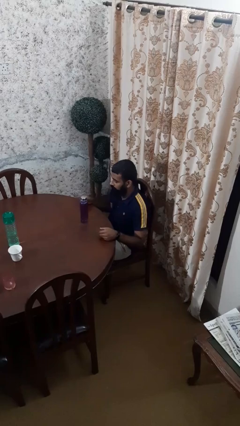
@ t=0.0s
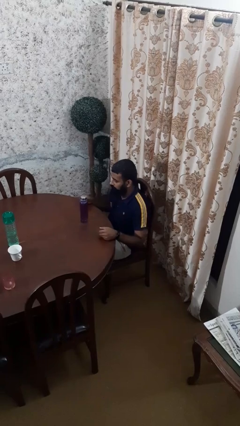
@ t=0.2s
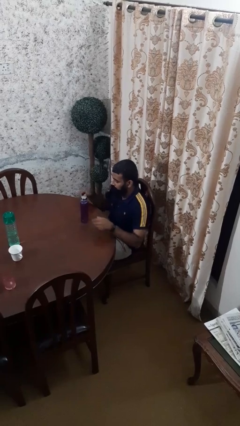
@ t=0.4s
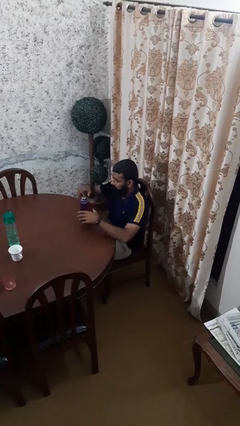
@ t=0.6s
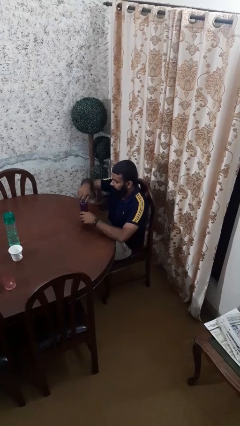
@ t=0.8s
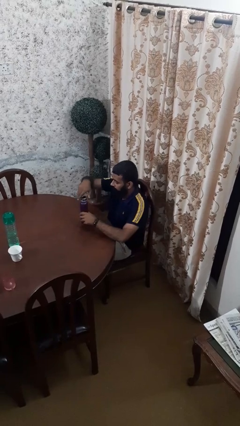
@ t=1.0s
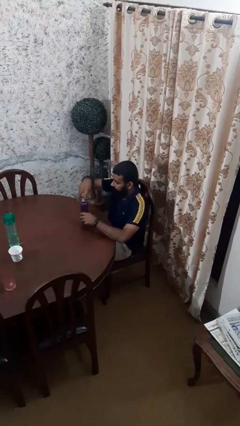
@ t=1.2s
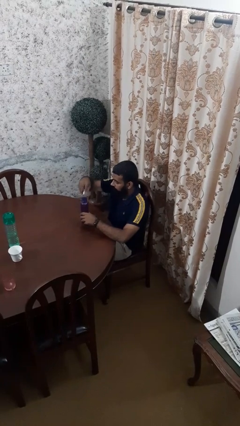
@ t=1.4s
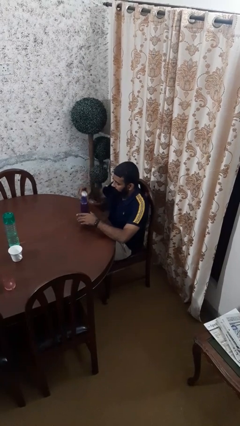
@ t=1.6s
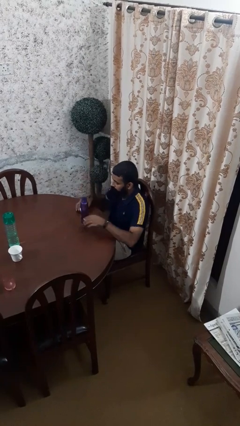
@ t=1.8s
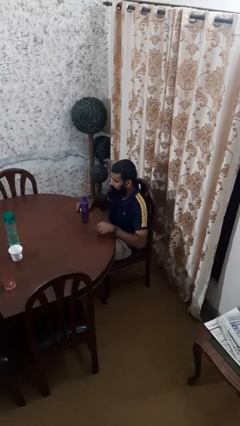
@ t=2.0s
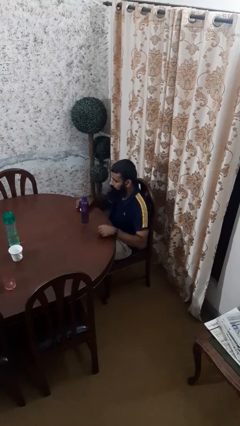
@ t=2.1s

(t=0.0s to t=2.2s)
person unscrews lid from bottle

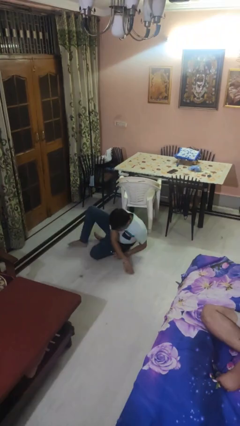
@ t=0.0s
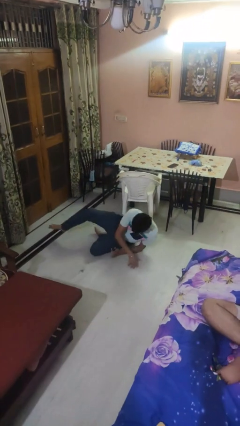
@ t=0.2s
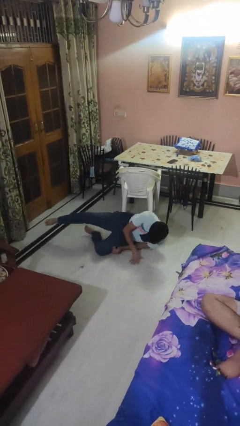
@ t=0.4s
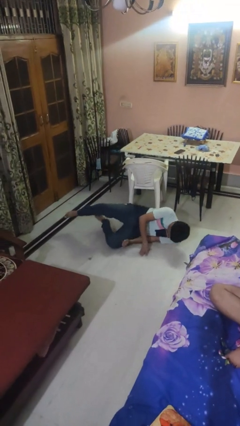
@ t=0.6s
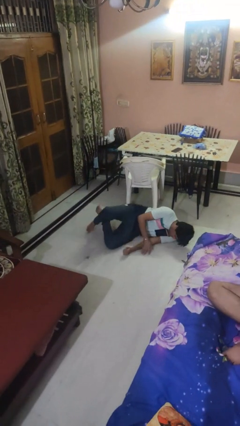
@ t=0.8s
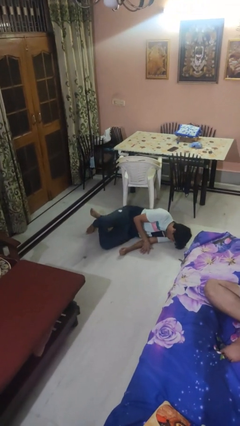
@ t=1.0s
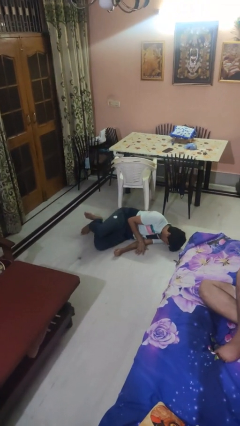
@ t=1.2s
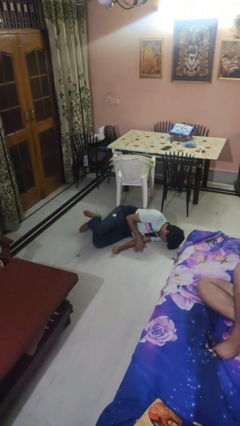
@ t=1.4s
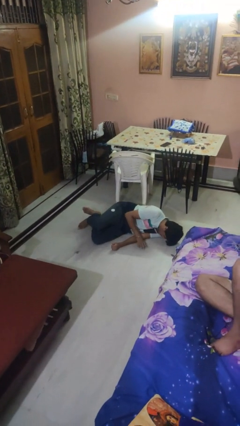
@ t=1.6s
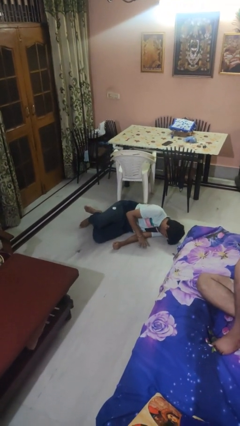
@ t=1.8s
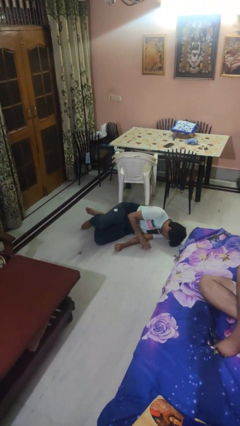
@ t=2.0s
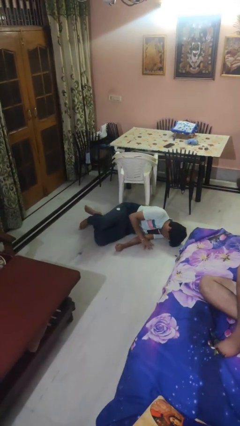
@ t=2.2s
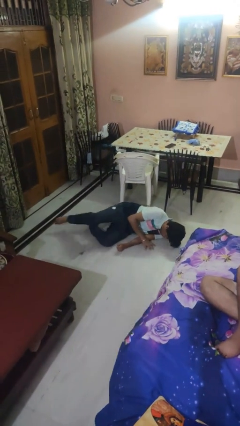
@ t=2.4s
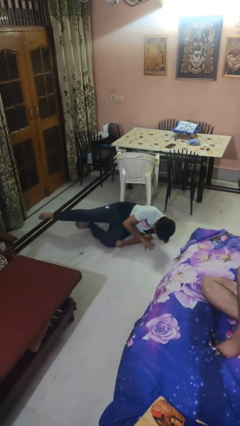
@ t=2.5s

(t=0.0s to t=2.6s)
person lies down on floor

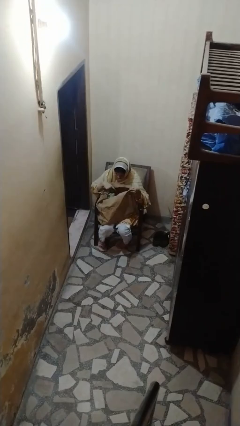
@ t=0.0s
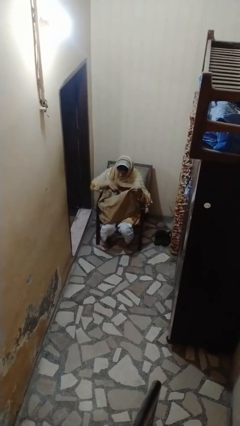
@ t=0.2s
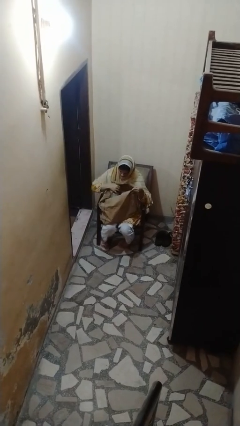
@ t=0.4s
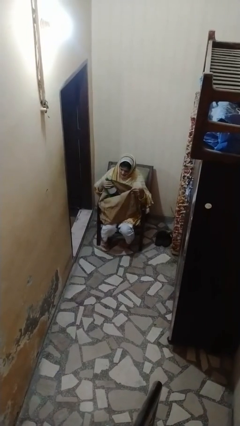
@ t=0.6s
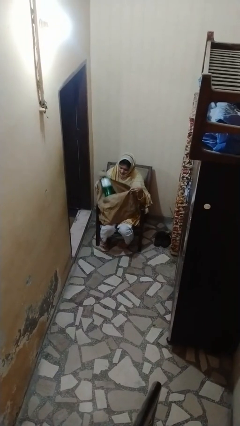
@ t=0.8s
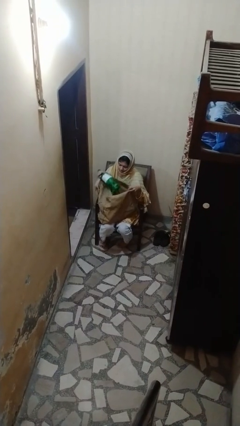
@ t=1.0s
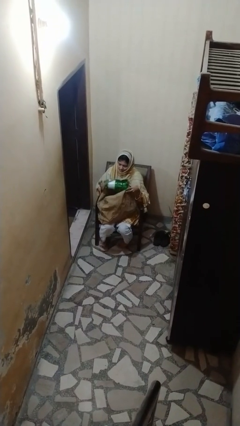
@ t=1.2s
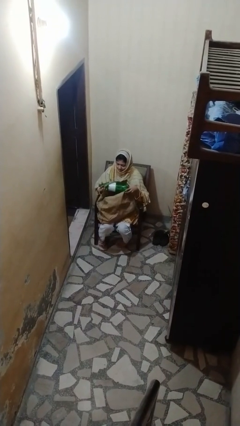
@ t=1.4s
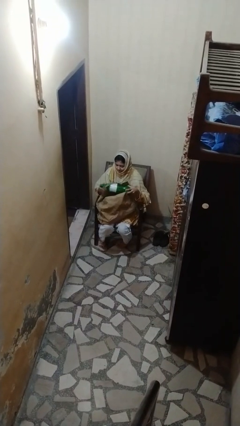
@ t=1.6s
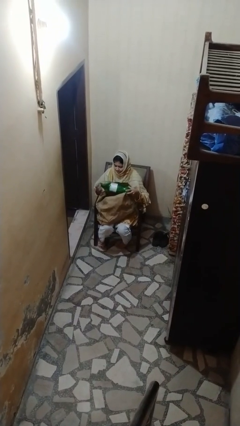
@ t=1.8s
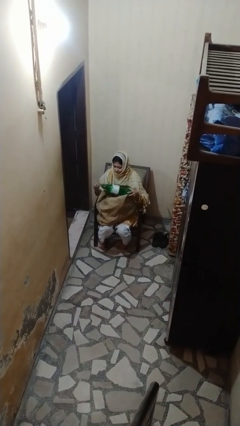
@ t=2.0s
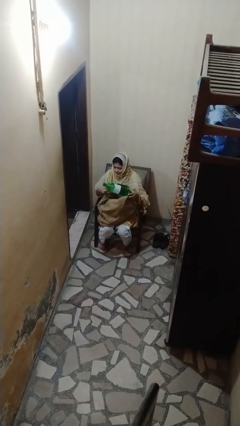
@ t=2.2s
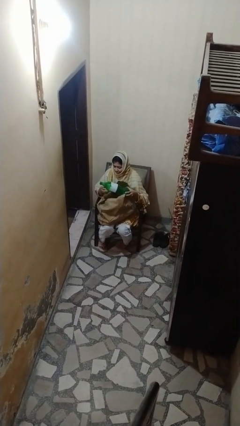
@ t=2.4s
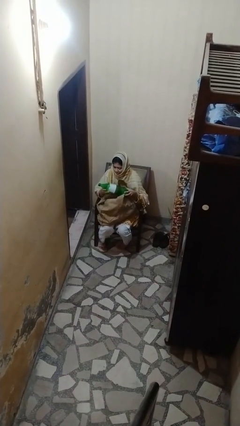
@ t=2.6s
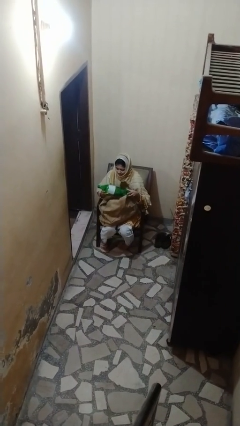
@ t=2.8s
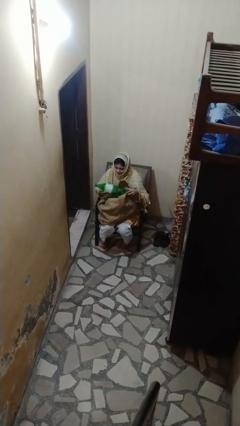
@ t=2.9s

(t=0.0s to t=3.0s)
person takes object from bag

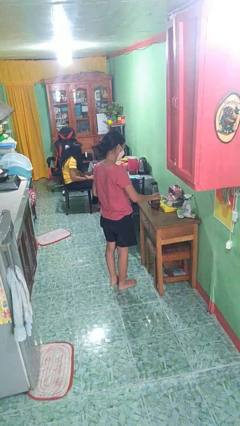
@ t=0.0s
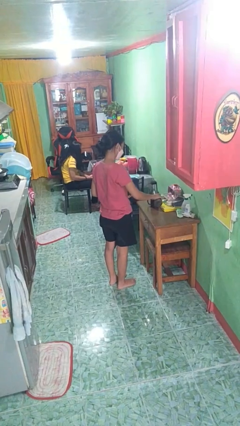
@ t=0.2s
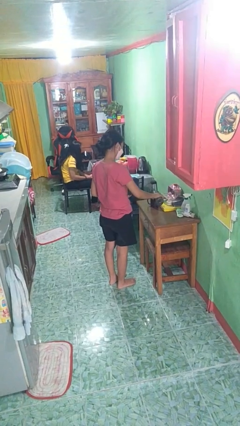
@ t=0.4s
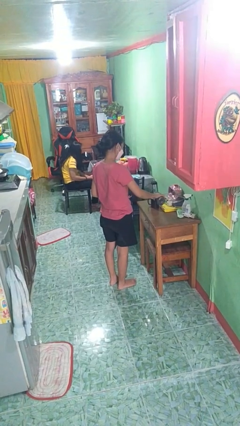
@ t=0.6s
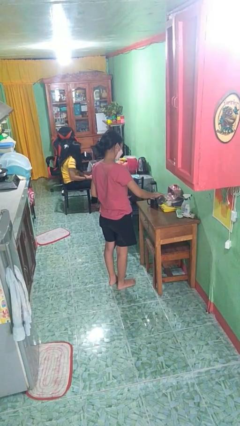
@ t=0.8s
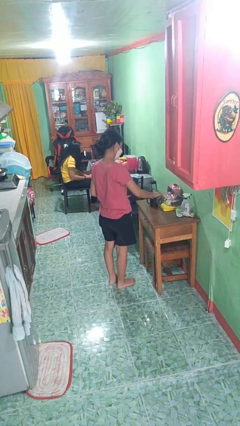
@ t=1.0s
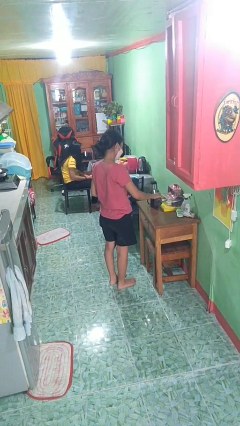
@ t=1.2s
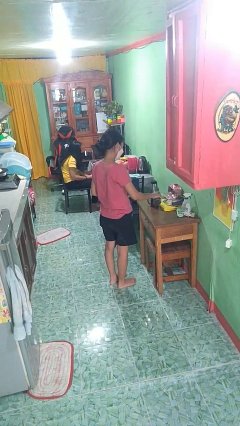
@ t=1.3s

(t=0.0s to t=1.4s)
person pours liquid into cup

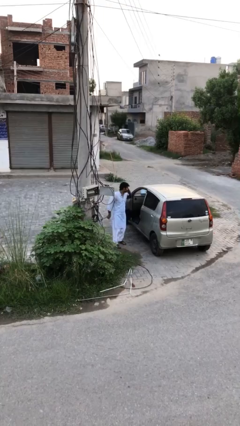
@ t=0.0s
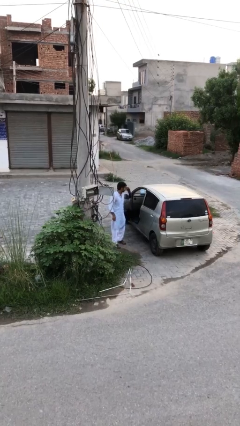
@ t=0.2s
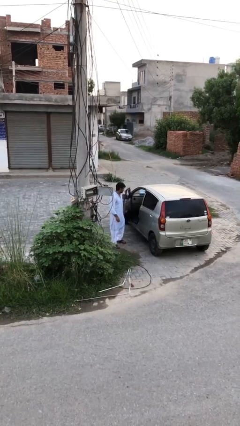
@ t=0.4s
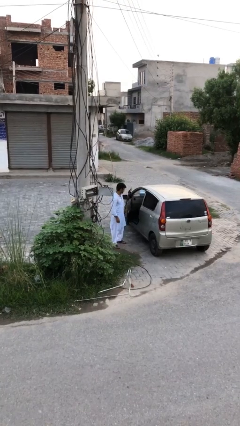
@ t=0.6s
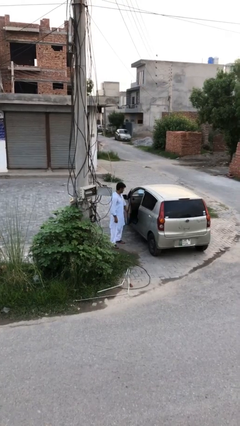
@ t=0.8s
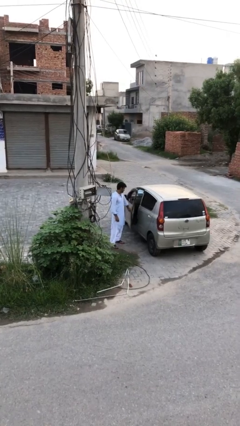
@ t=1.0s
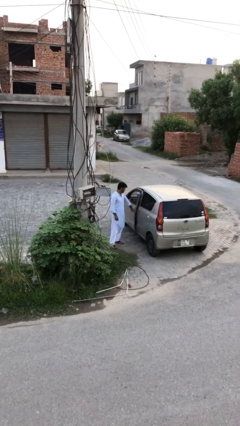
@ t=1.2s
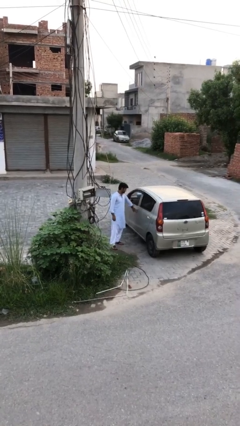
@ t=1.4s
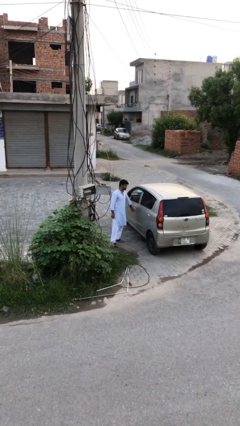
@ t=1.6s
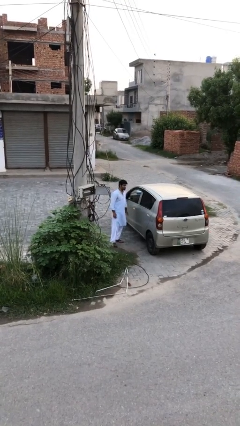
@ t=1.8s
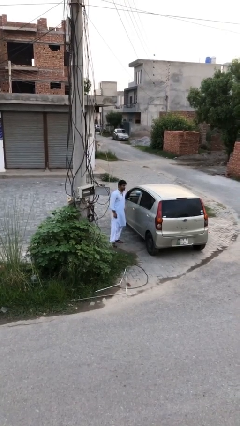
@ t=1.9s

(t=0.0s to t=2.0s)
person closes car door

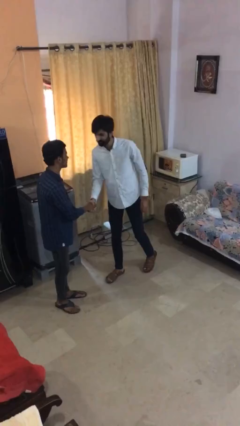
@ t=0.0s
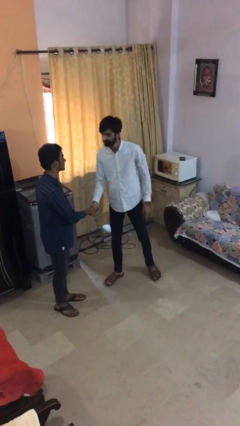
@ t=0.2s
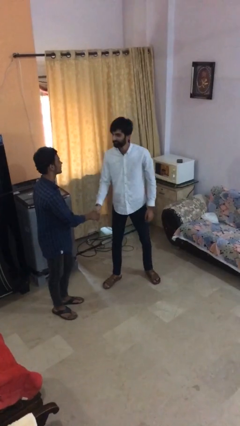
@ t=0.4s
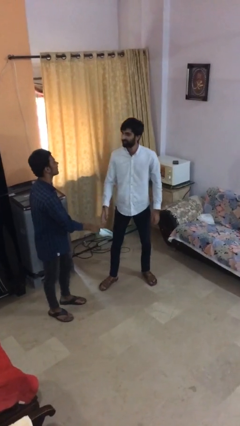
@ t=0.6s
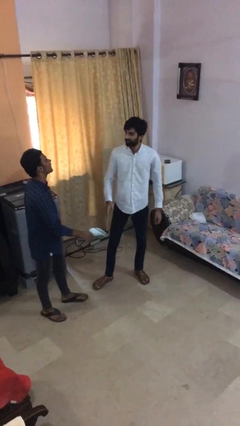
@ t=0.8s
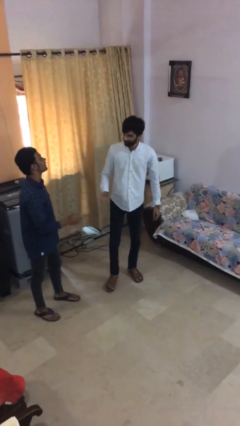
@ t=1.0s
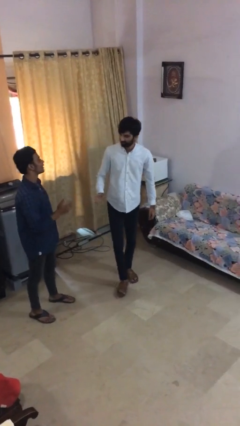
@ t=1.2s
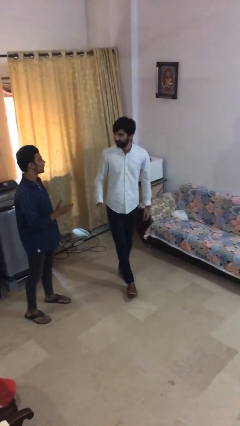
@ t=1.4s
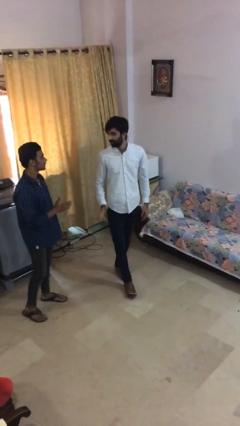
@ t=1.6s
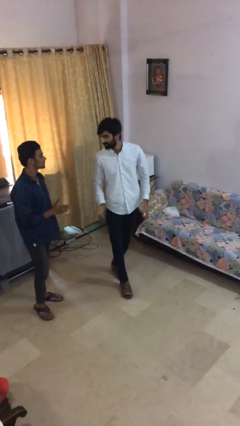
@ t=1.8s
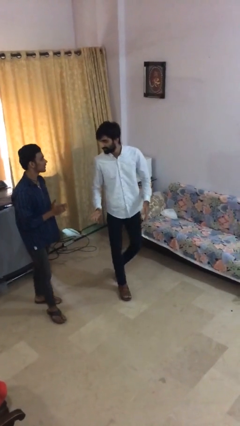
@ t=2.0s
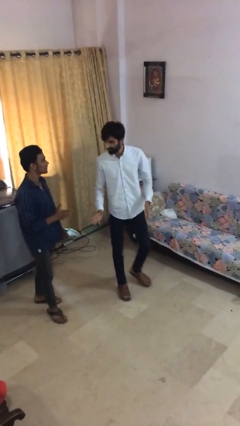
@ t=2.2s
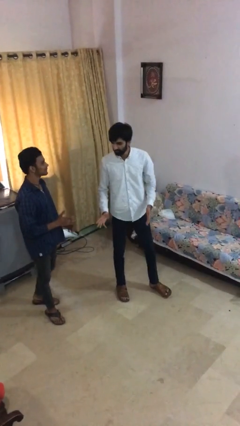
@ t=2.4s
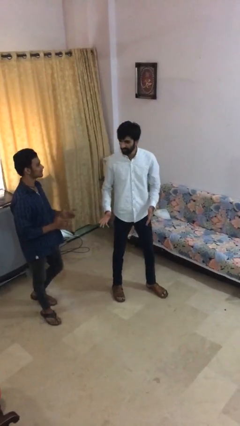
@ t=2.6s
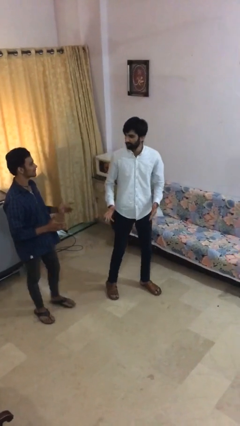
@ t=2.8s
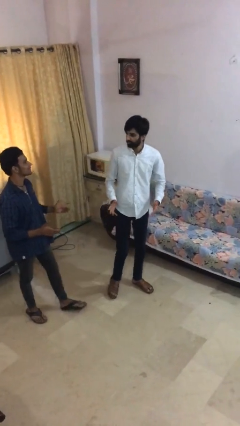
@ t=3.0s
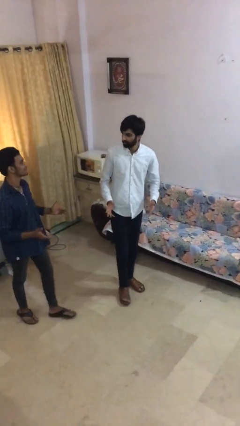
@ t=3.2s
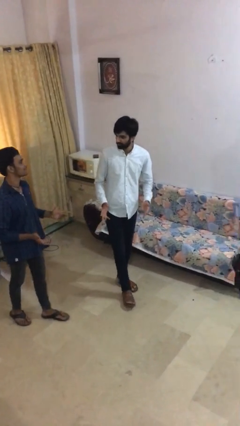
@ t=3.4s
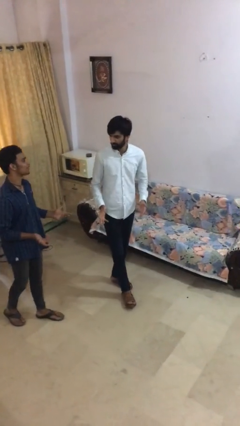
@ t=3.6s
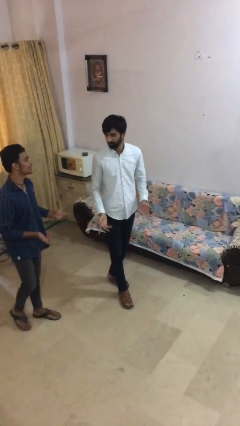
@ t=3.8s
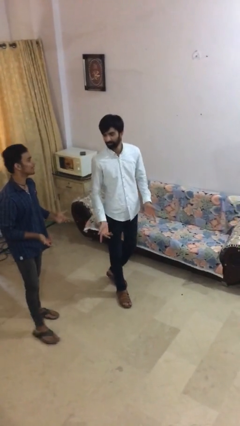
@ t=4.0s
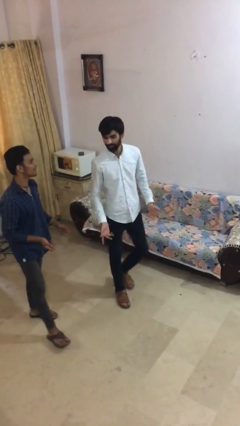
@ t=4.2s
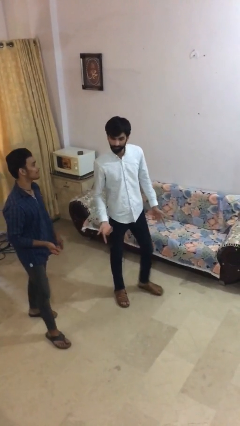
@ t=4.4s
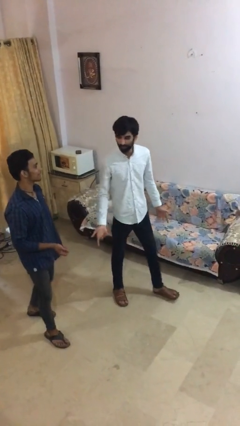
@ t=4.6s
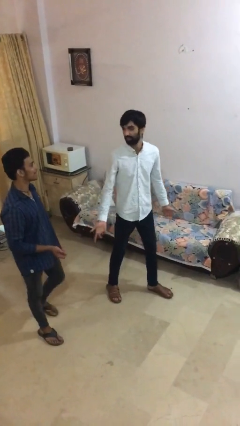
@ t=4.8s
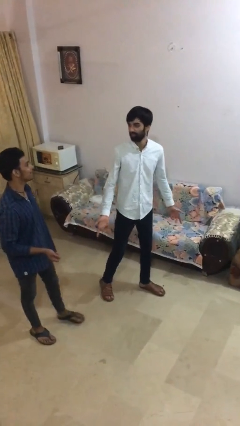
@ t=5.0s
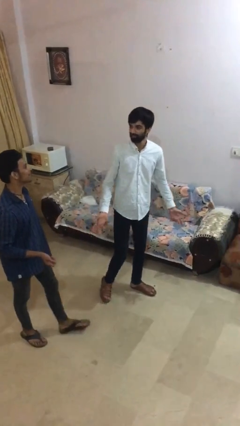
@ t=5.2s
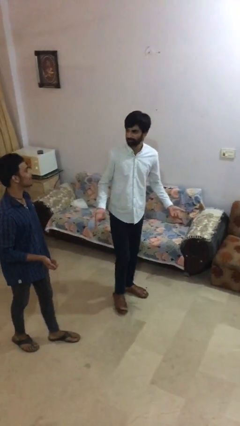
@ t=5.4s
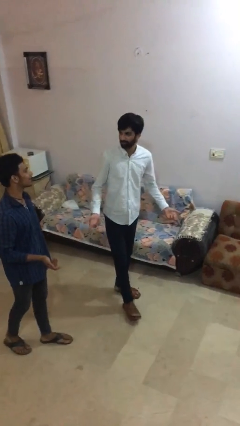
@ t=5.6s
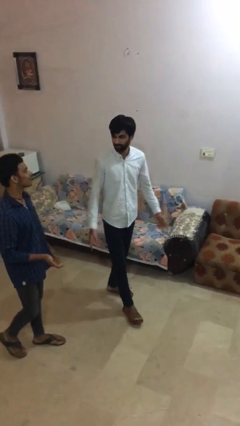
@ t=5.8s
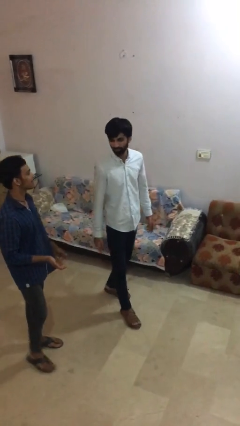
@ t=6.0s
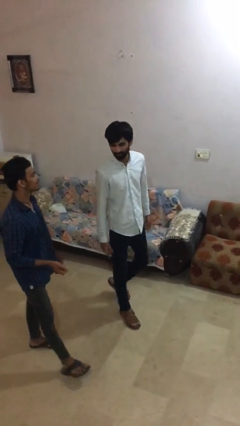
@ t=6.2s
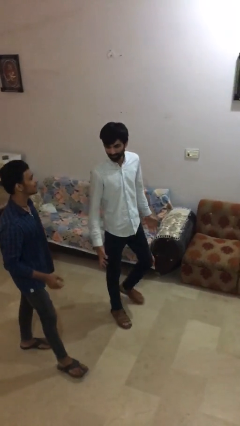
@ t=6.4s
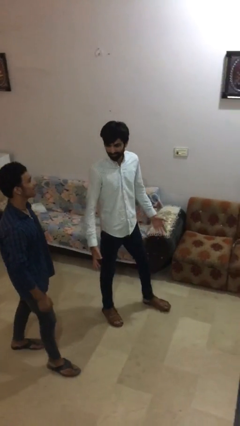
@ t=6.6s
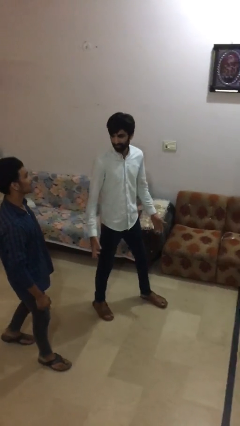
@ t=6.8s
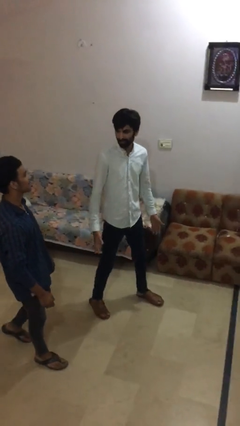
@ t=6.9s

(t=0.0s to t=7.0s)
person talks to person
